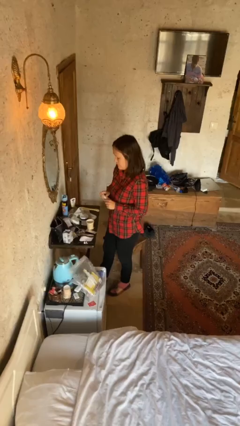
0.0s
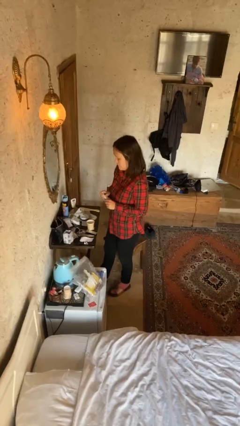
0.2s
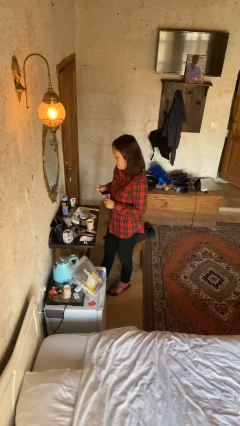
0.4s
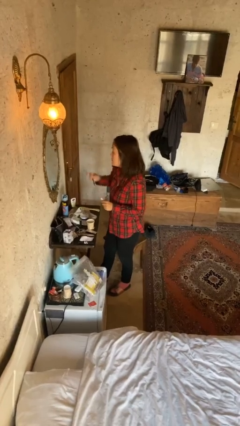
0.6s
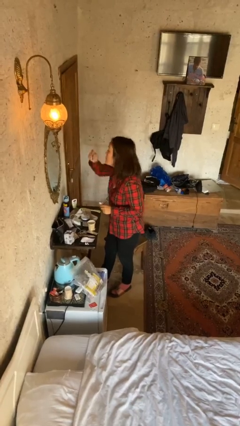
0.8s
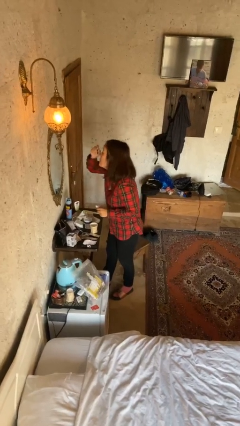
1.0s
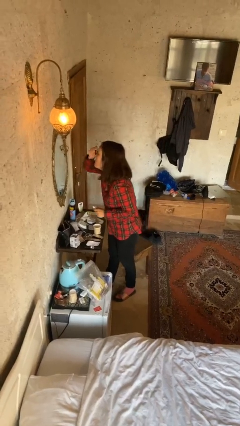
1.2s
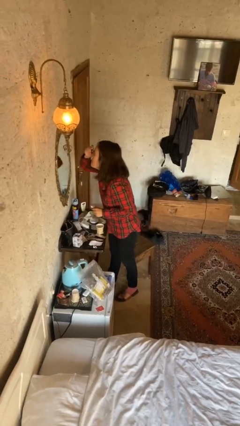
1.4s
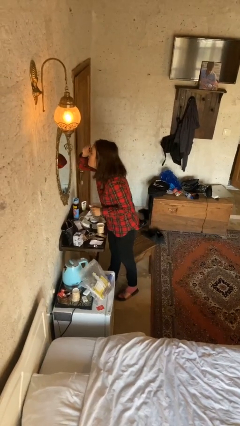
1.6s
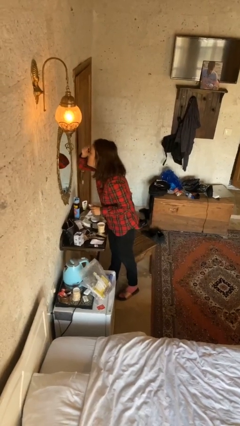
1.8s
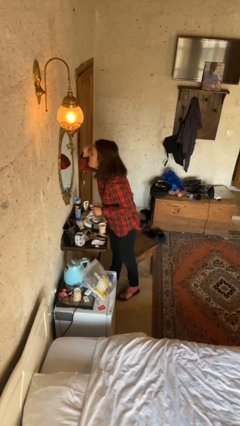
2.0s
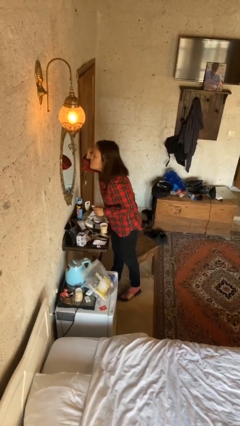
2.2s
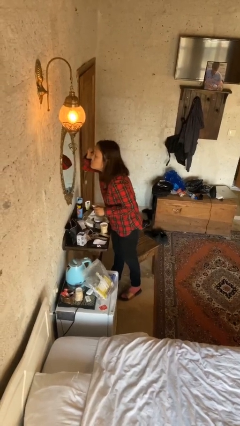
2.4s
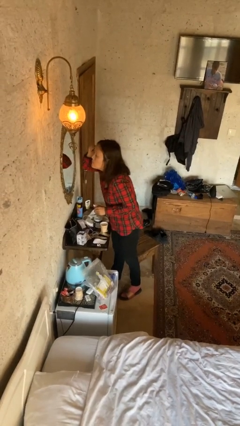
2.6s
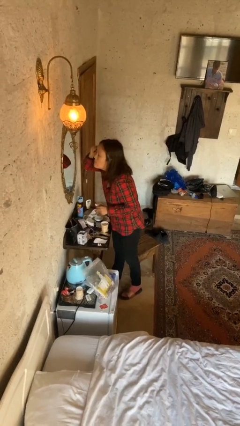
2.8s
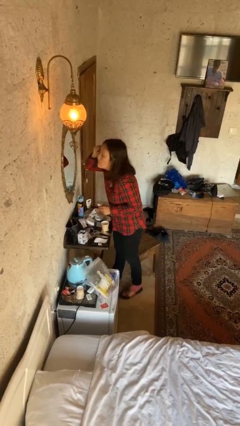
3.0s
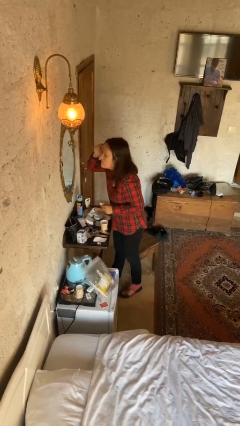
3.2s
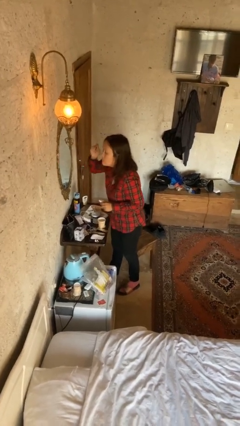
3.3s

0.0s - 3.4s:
person applies eye makeup

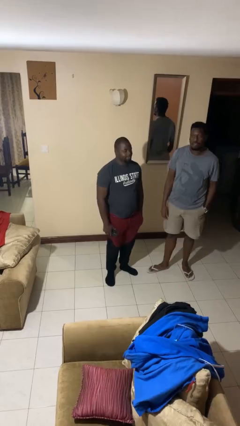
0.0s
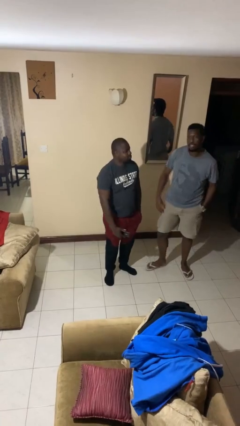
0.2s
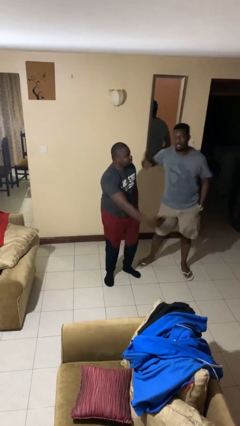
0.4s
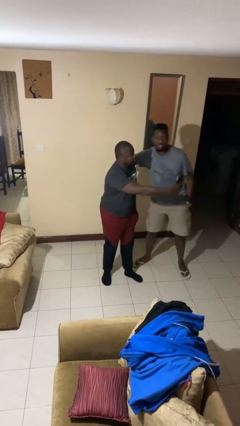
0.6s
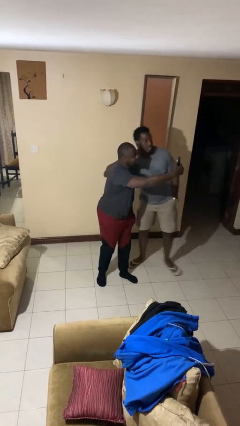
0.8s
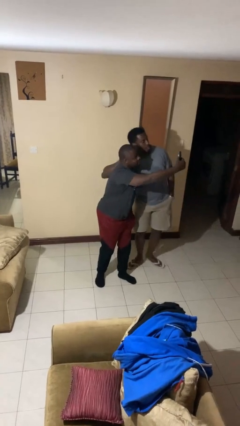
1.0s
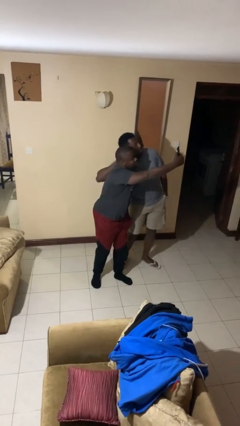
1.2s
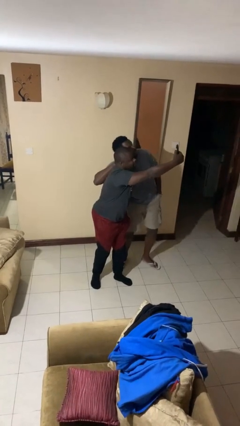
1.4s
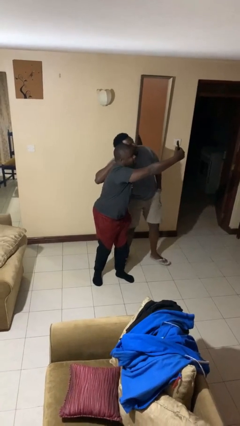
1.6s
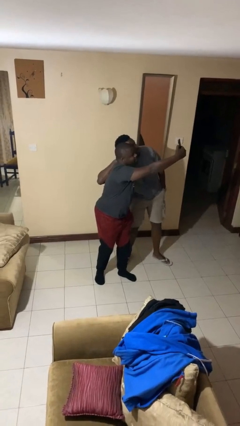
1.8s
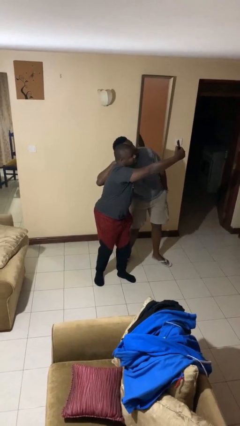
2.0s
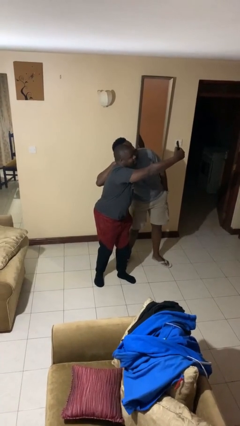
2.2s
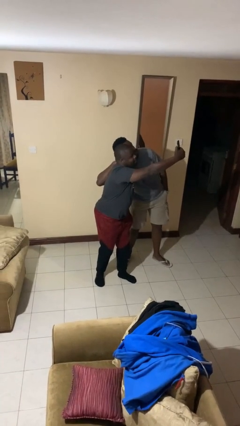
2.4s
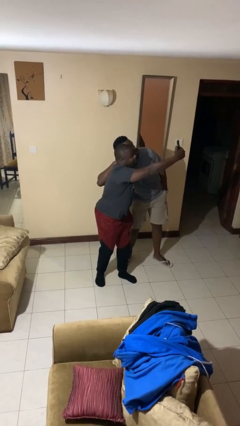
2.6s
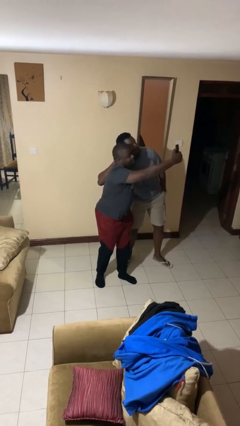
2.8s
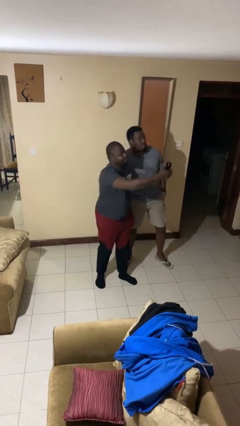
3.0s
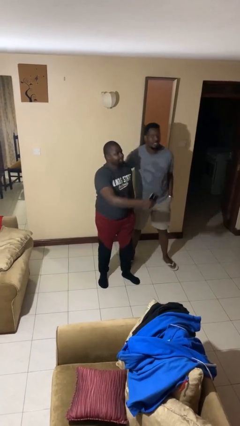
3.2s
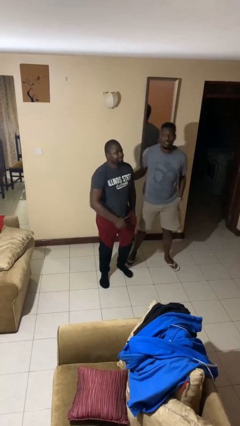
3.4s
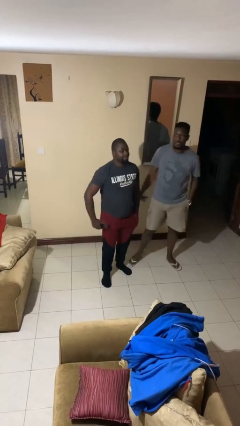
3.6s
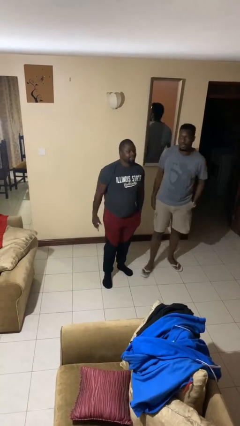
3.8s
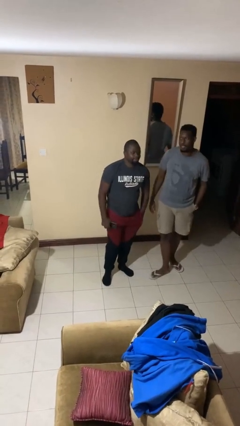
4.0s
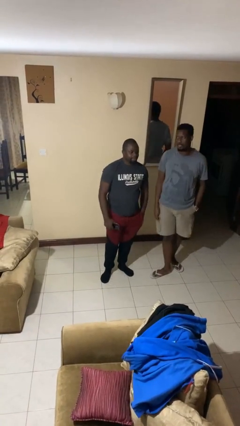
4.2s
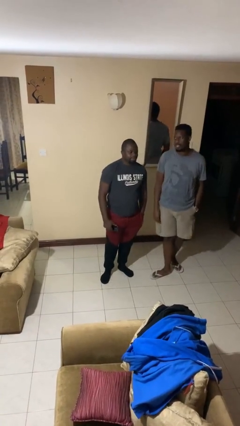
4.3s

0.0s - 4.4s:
person takes selfie with person

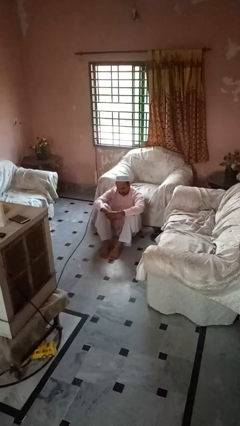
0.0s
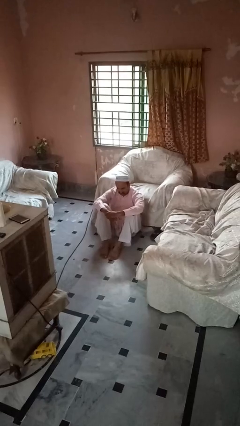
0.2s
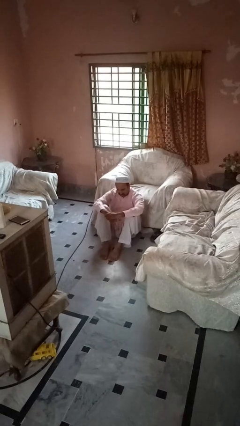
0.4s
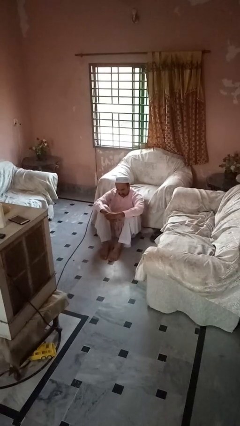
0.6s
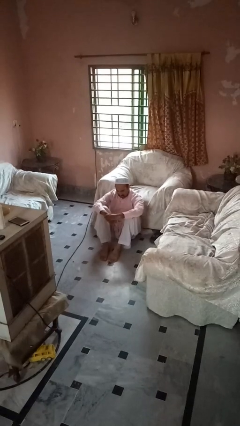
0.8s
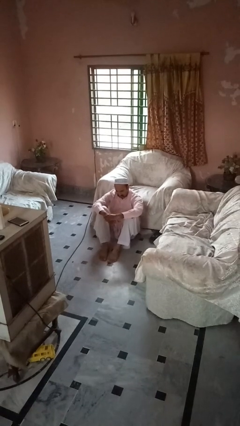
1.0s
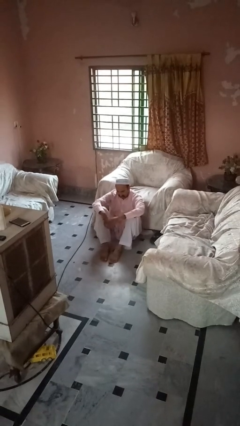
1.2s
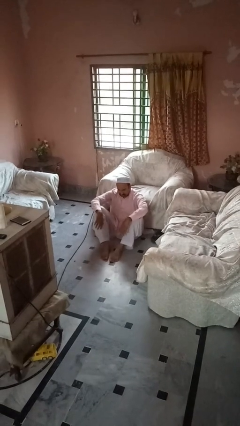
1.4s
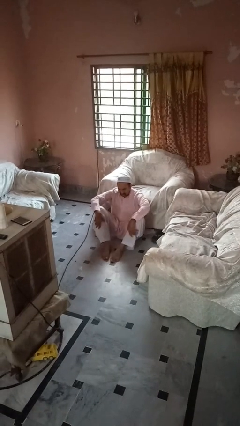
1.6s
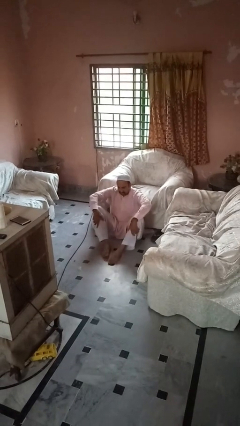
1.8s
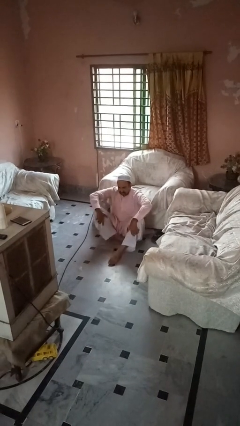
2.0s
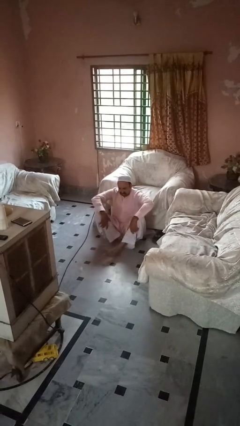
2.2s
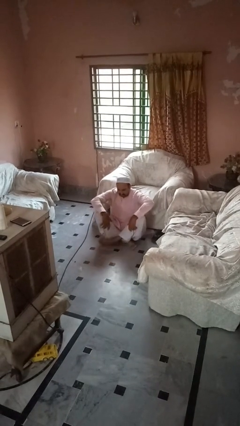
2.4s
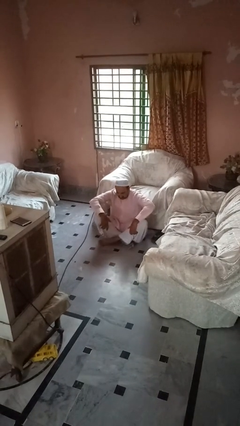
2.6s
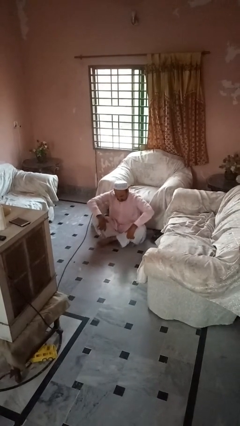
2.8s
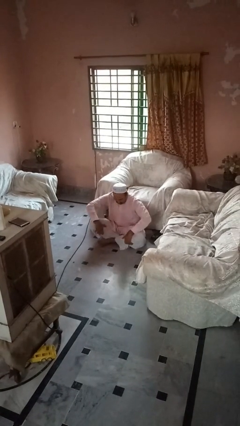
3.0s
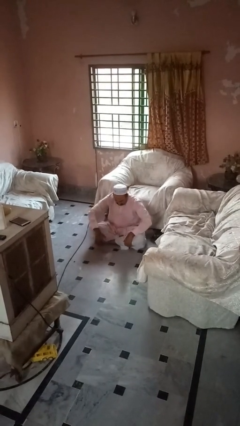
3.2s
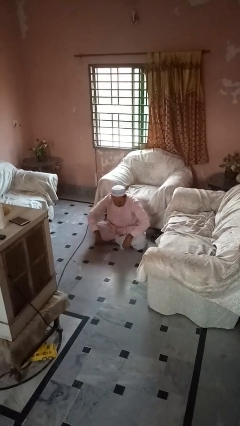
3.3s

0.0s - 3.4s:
person crosses legs

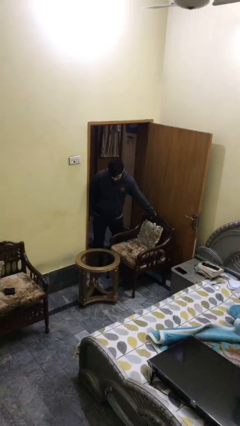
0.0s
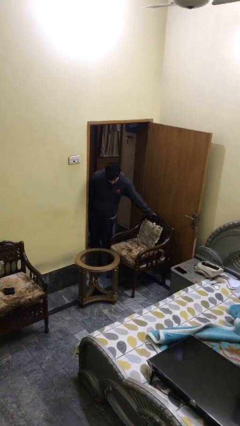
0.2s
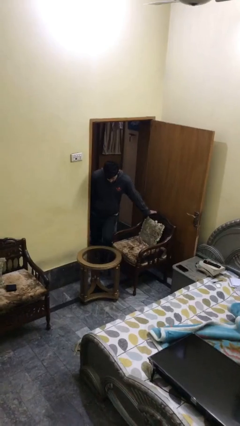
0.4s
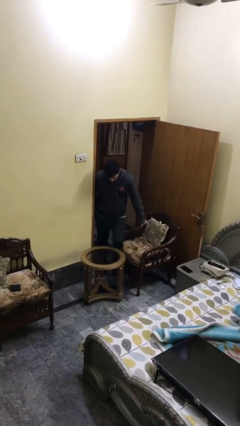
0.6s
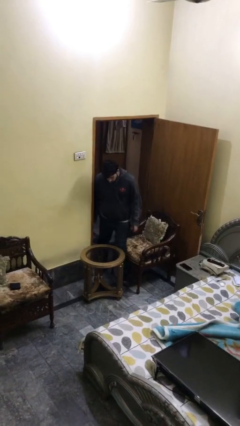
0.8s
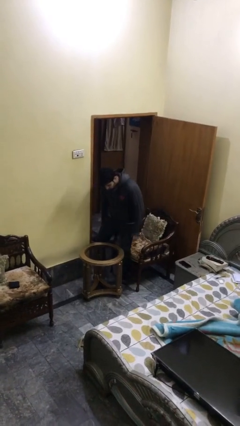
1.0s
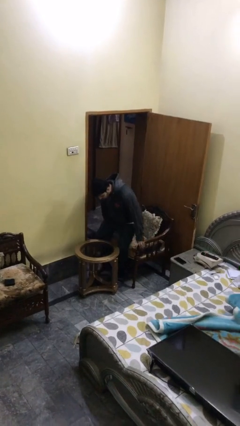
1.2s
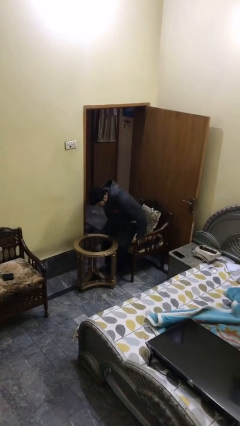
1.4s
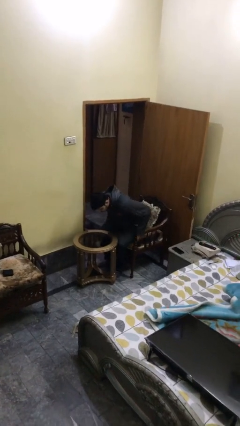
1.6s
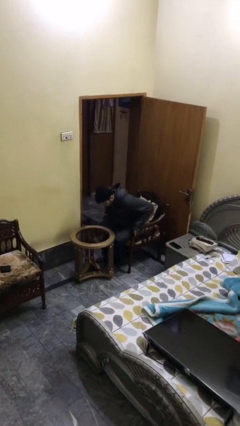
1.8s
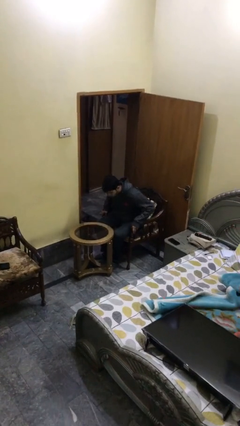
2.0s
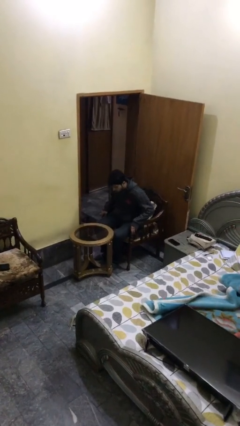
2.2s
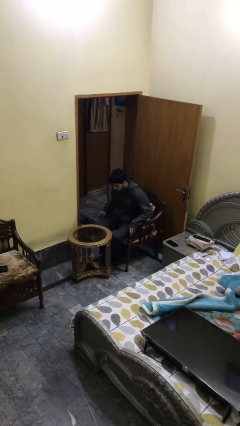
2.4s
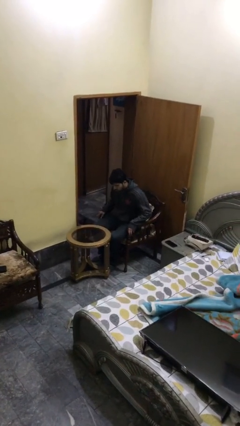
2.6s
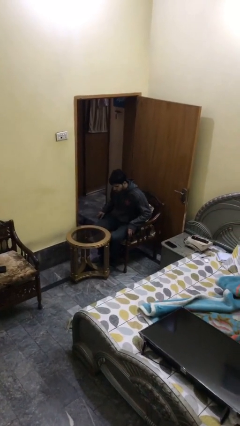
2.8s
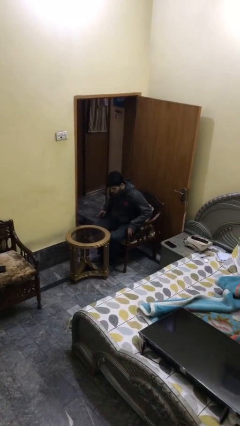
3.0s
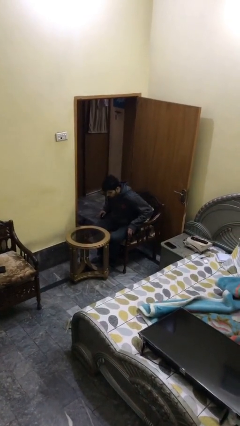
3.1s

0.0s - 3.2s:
person sits down

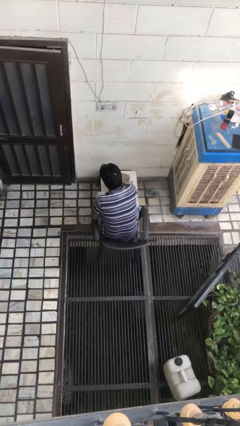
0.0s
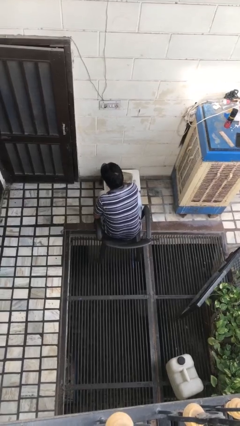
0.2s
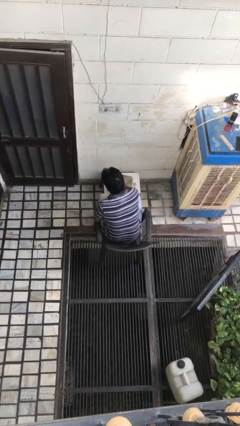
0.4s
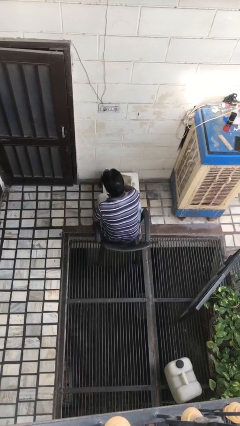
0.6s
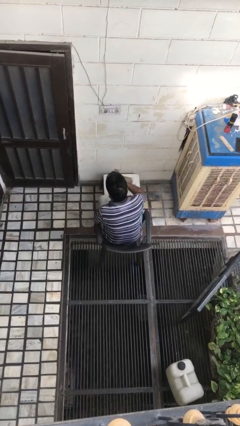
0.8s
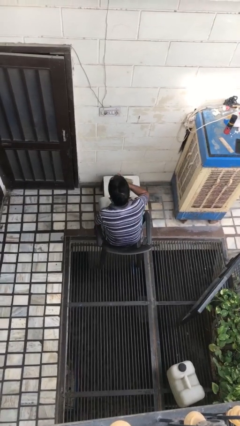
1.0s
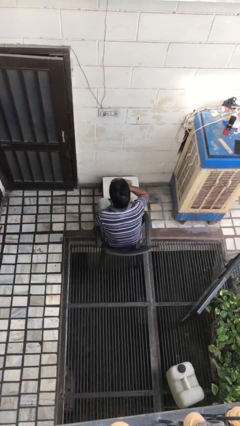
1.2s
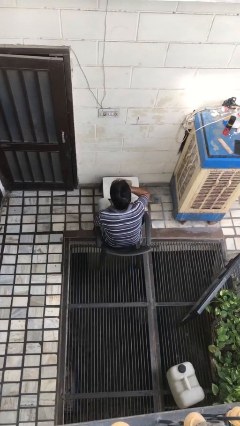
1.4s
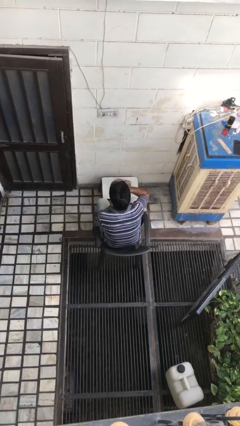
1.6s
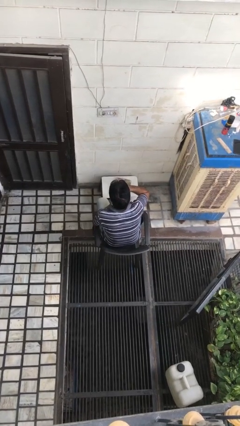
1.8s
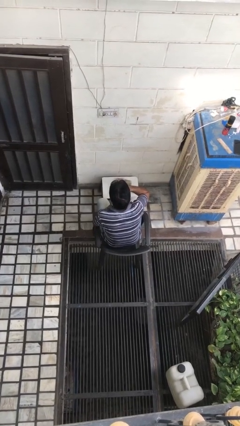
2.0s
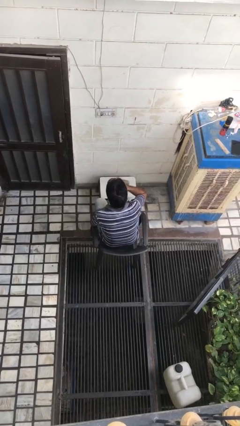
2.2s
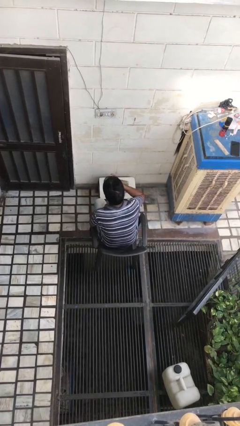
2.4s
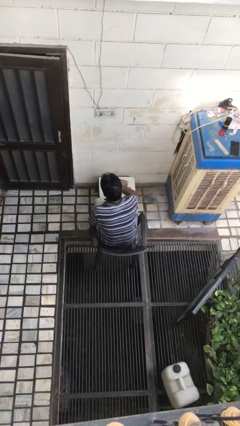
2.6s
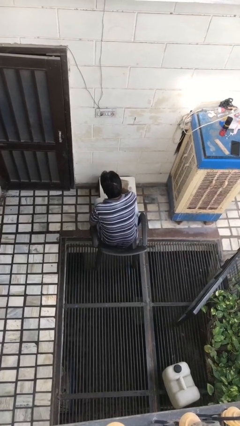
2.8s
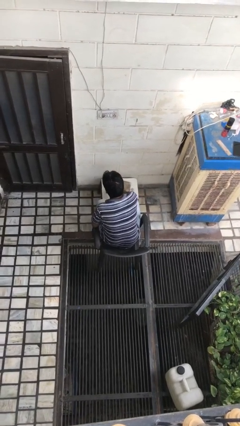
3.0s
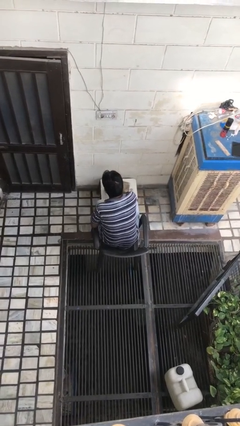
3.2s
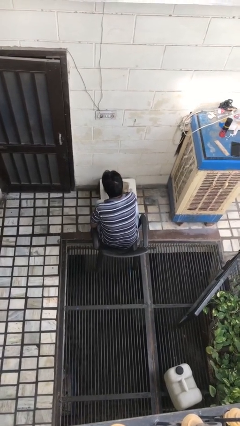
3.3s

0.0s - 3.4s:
person drinks from cup
